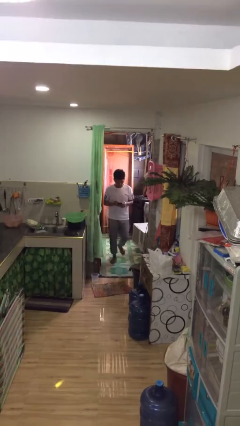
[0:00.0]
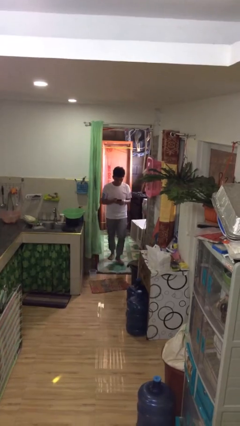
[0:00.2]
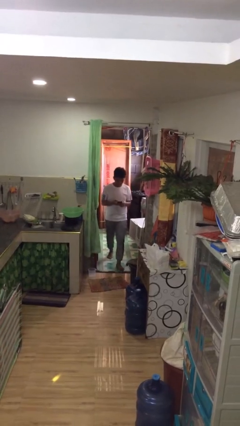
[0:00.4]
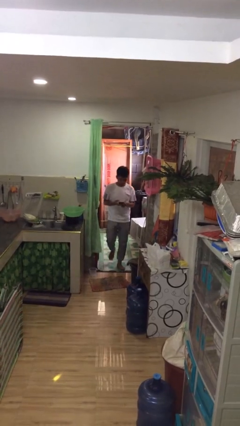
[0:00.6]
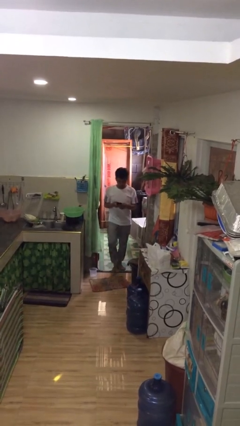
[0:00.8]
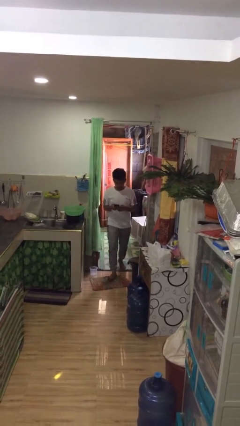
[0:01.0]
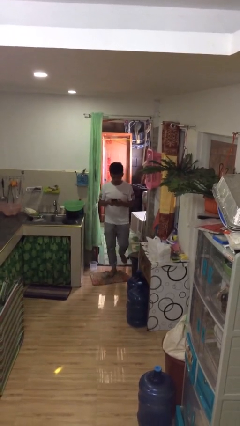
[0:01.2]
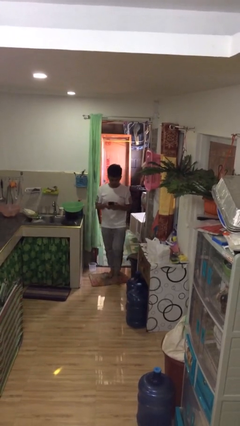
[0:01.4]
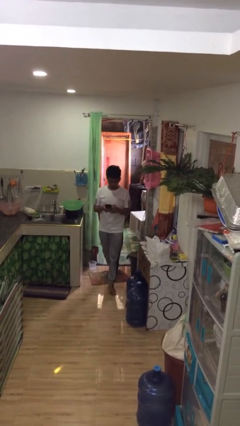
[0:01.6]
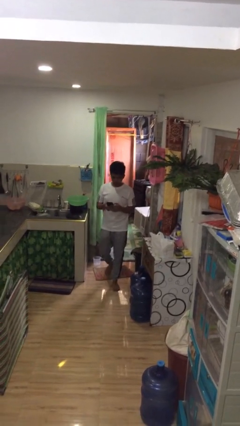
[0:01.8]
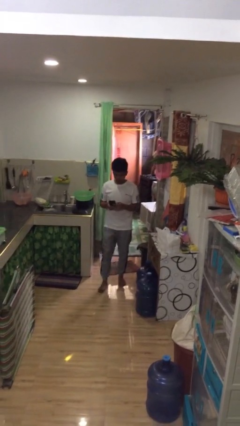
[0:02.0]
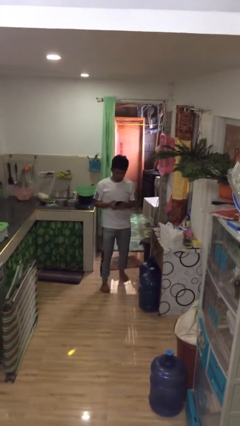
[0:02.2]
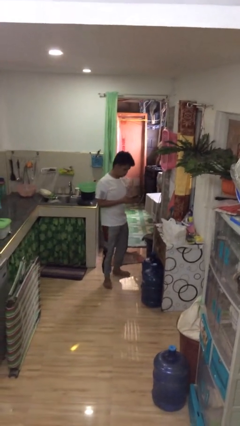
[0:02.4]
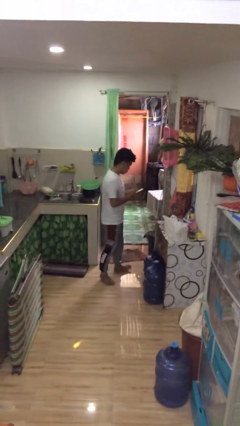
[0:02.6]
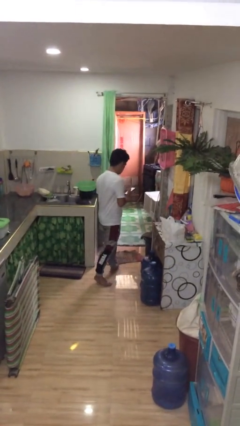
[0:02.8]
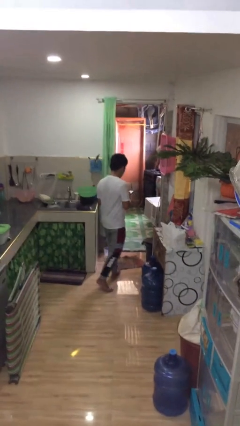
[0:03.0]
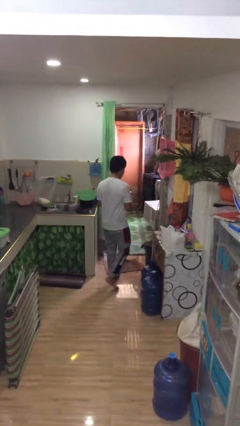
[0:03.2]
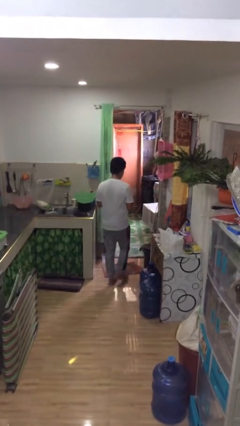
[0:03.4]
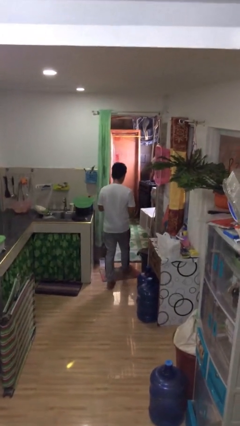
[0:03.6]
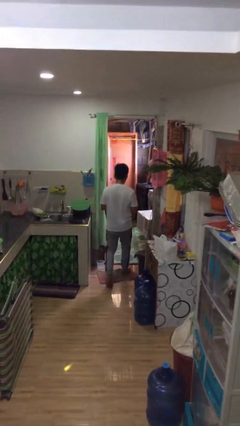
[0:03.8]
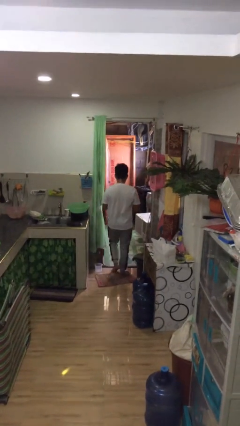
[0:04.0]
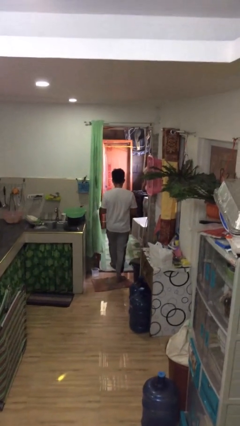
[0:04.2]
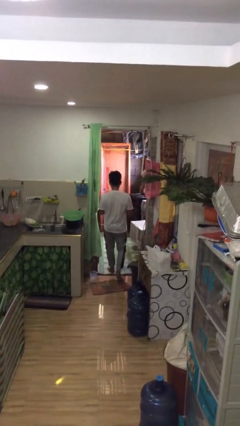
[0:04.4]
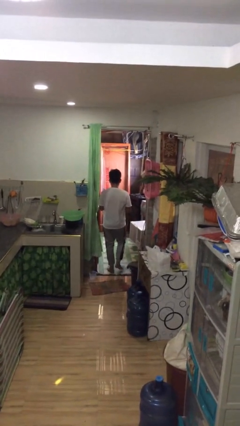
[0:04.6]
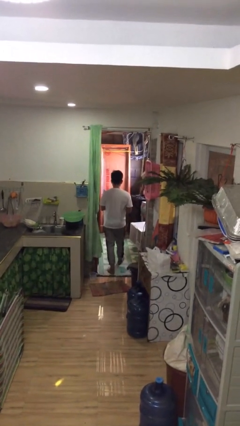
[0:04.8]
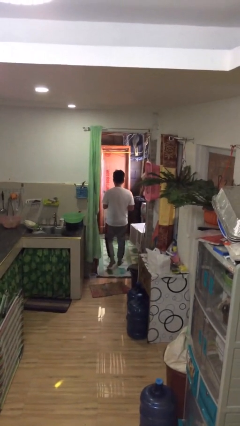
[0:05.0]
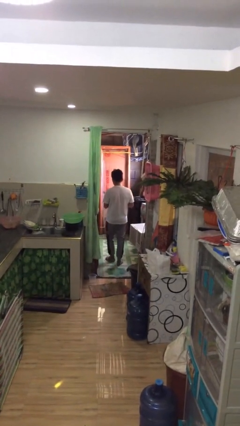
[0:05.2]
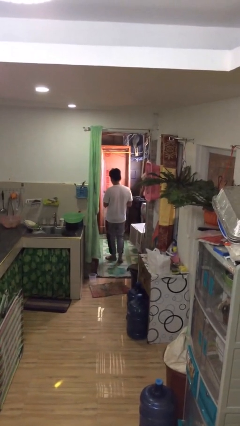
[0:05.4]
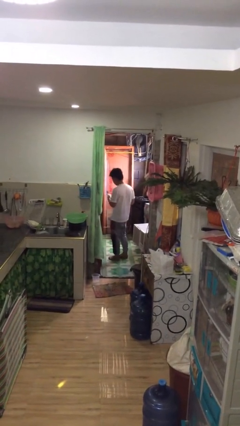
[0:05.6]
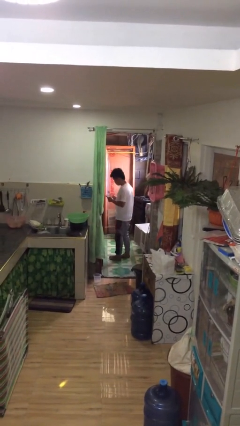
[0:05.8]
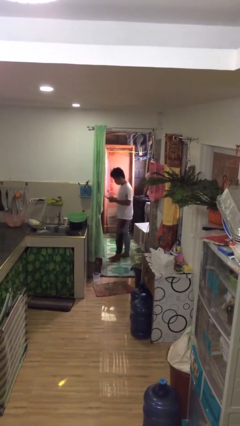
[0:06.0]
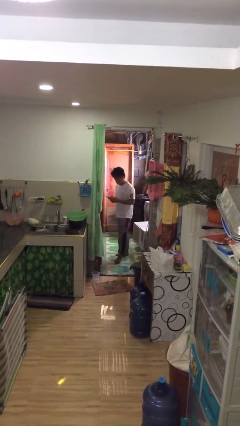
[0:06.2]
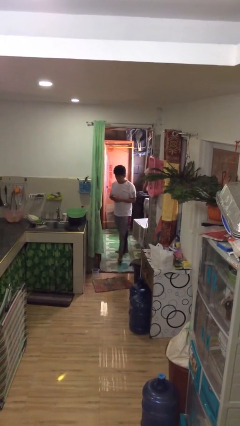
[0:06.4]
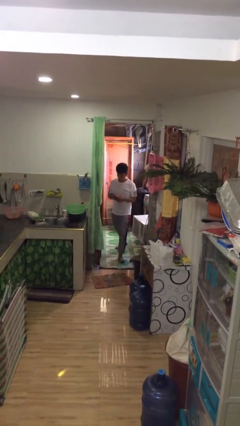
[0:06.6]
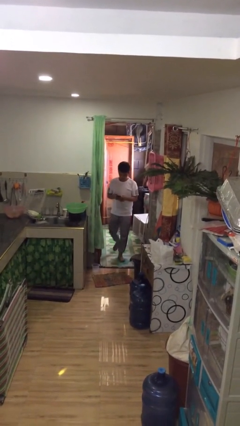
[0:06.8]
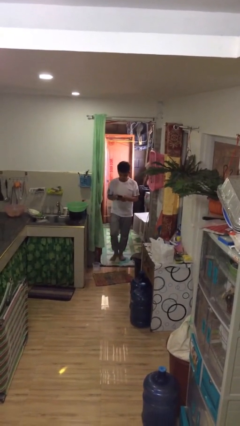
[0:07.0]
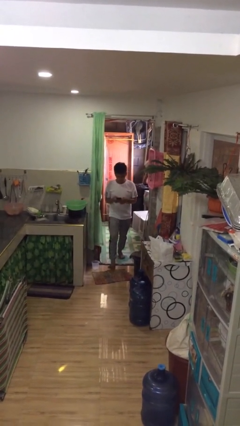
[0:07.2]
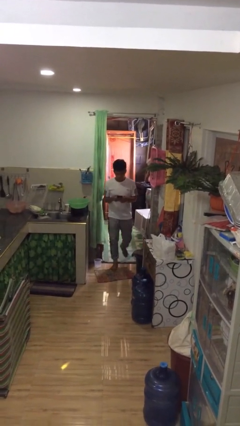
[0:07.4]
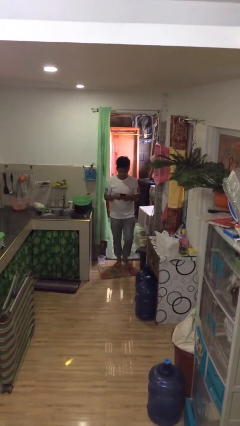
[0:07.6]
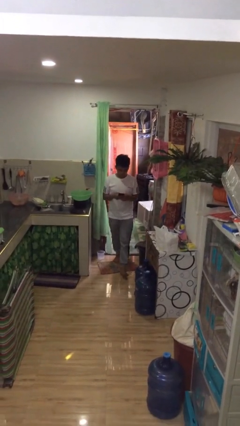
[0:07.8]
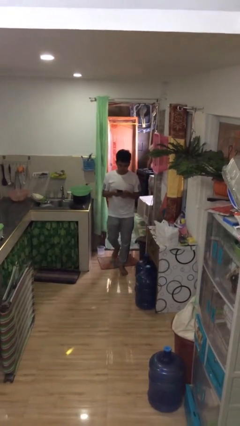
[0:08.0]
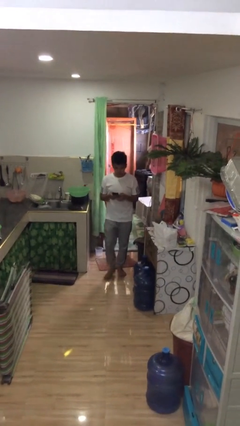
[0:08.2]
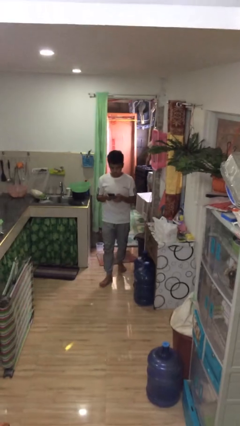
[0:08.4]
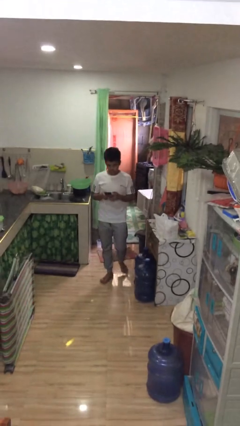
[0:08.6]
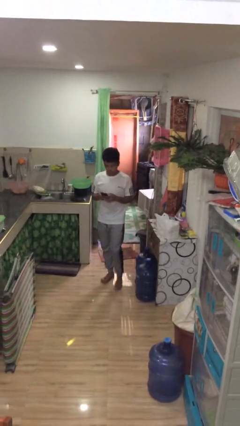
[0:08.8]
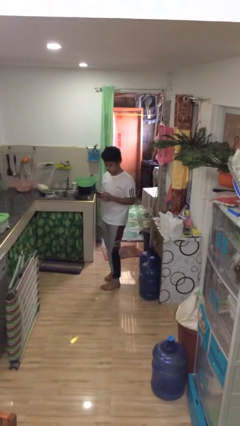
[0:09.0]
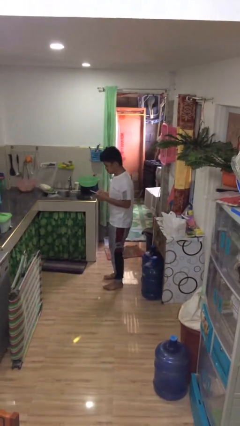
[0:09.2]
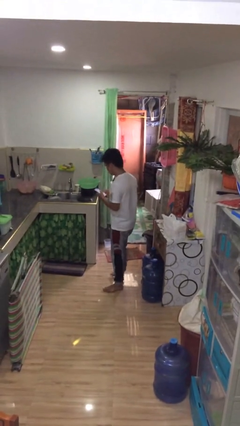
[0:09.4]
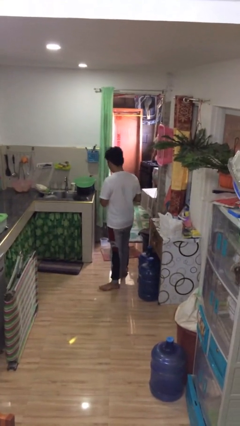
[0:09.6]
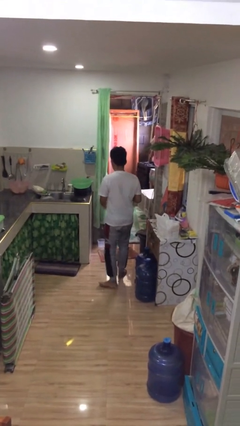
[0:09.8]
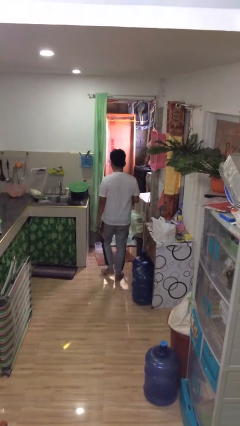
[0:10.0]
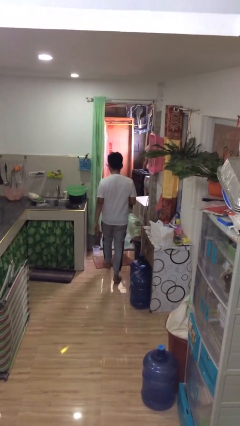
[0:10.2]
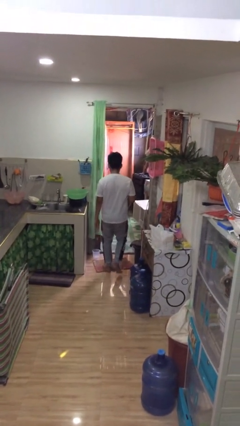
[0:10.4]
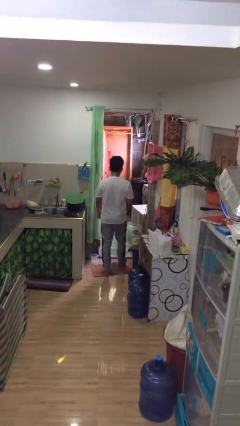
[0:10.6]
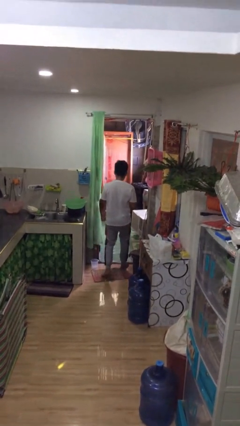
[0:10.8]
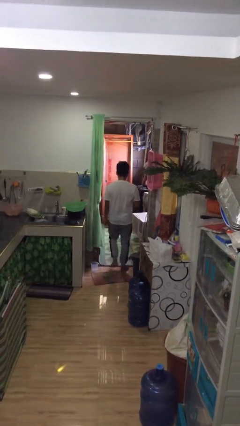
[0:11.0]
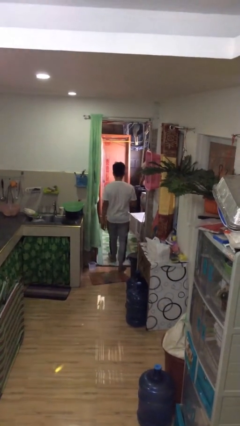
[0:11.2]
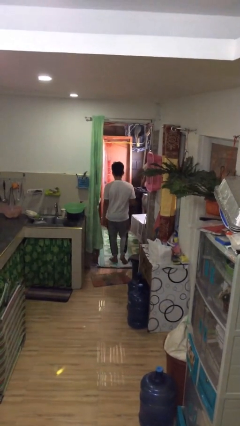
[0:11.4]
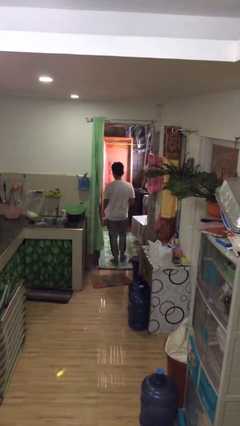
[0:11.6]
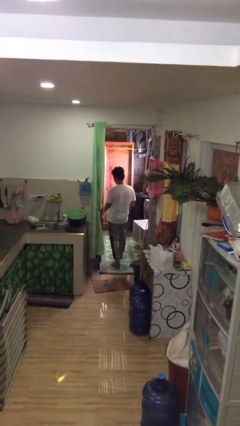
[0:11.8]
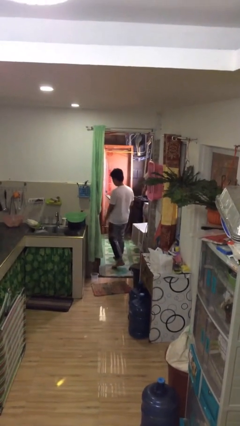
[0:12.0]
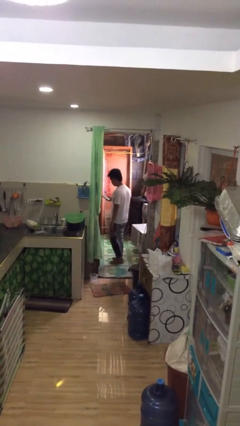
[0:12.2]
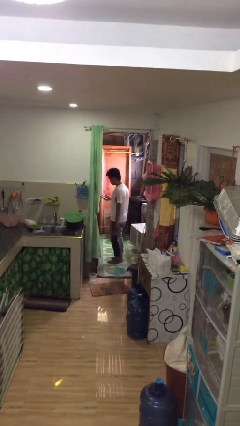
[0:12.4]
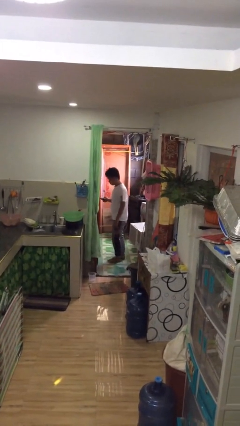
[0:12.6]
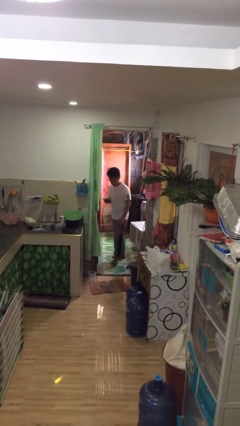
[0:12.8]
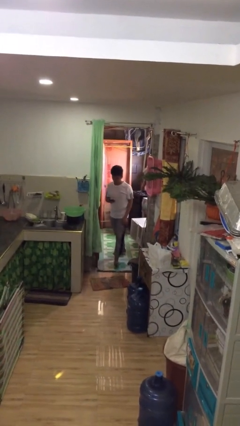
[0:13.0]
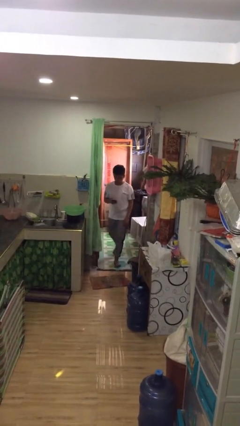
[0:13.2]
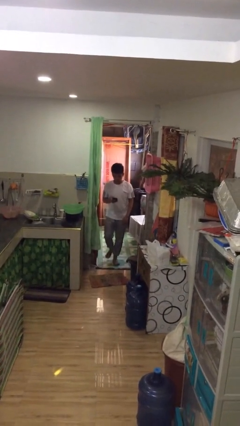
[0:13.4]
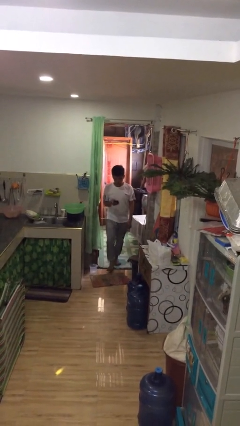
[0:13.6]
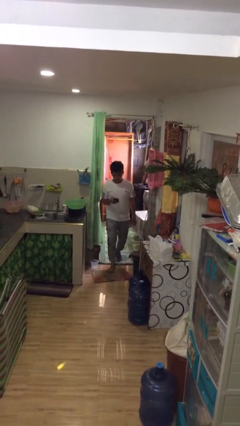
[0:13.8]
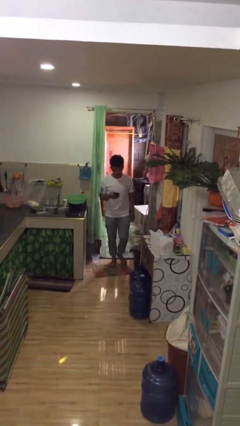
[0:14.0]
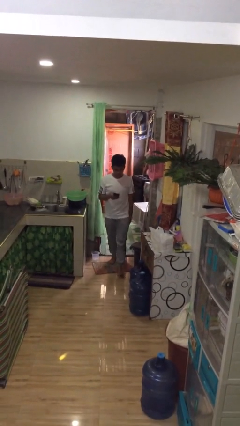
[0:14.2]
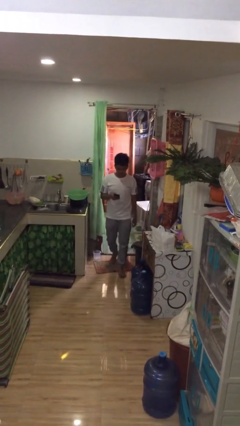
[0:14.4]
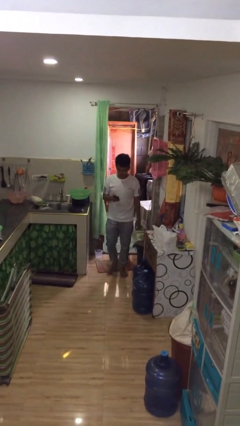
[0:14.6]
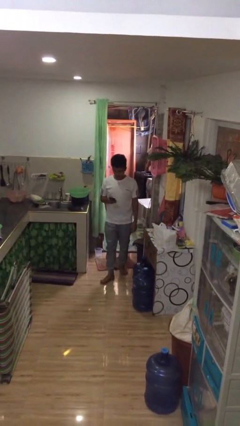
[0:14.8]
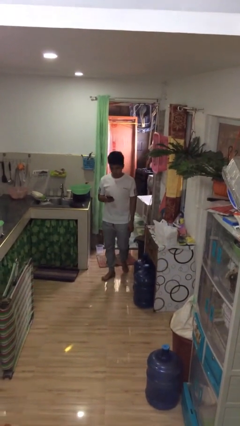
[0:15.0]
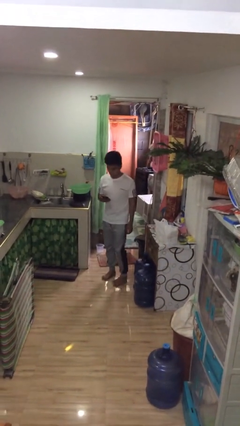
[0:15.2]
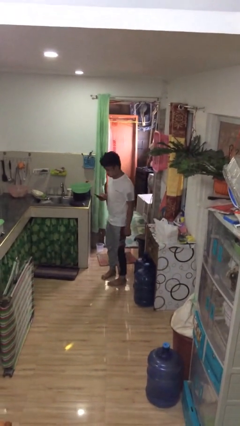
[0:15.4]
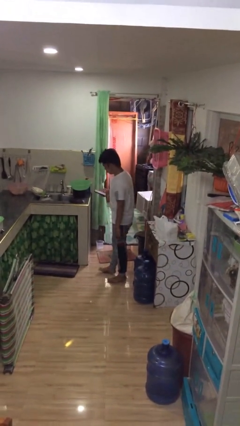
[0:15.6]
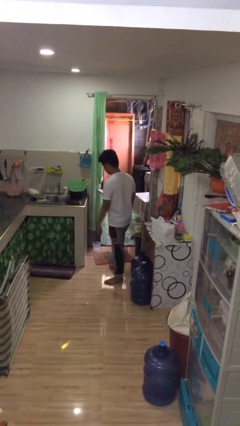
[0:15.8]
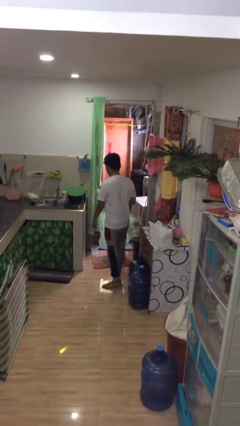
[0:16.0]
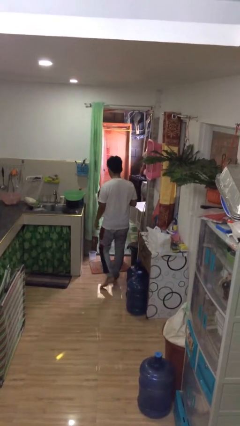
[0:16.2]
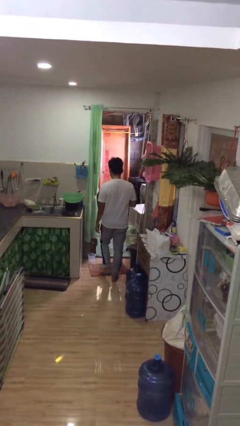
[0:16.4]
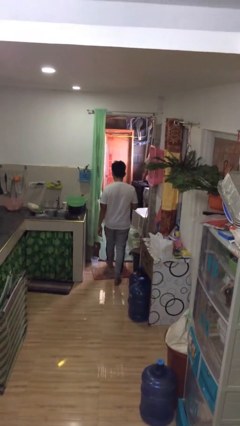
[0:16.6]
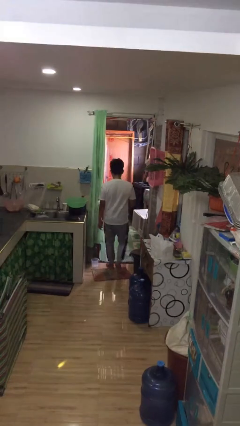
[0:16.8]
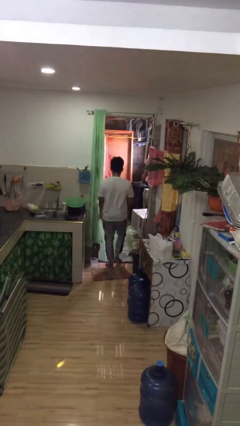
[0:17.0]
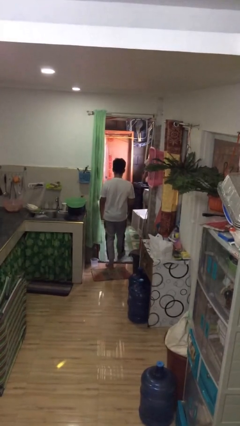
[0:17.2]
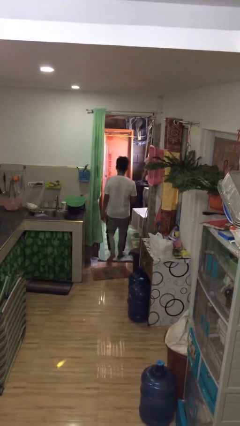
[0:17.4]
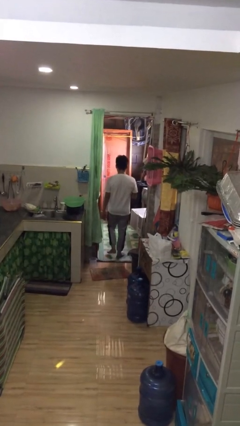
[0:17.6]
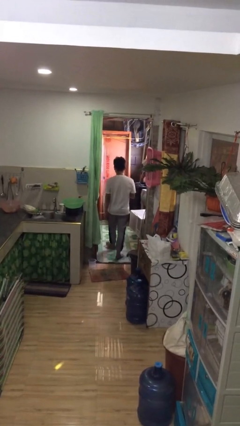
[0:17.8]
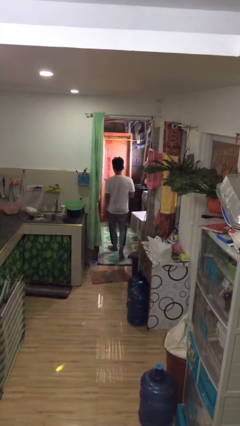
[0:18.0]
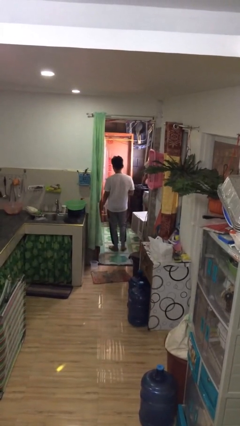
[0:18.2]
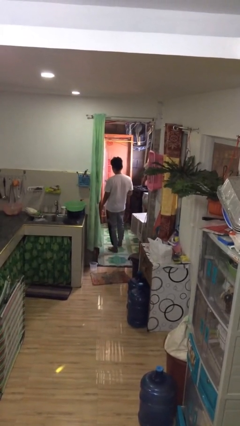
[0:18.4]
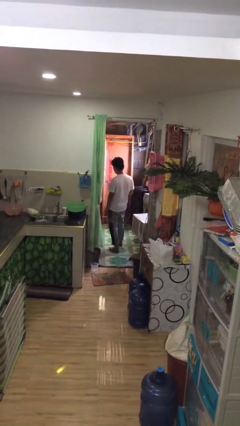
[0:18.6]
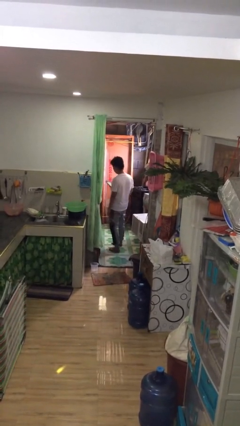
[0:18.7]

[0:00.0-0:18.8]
person texts on phone
